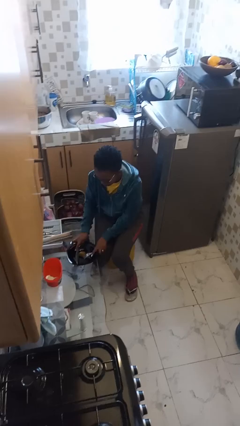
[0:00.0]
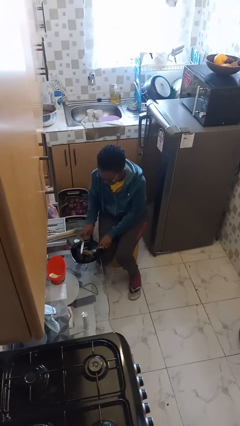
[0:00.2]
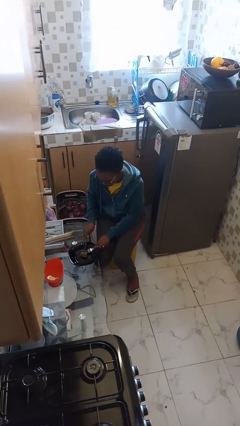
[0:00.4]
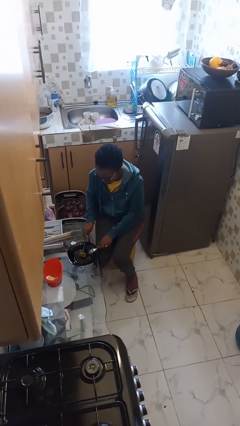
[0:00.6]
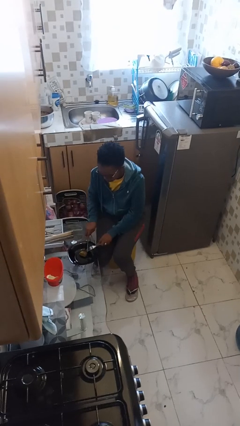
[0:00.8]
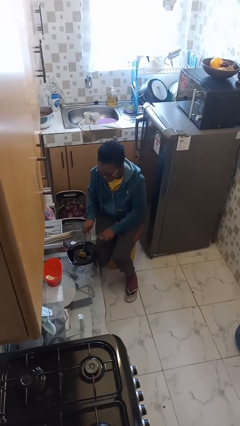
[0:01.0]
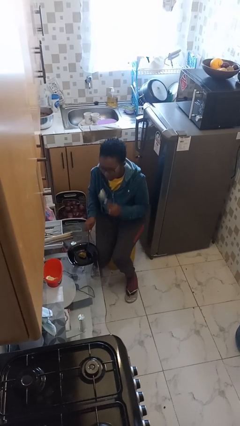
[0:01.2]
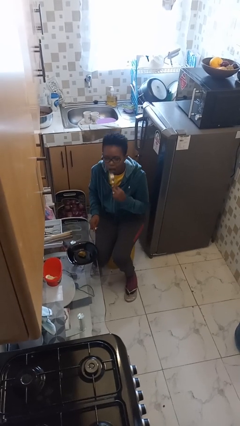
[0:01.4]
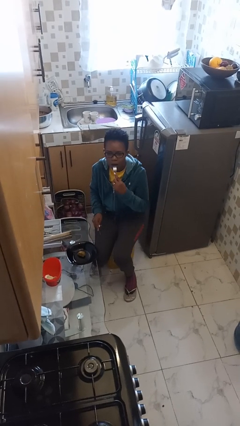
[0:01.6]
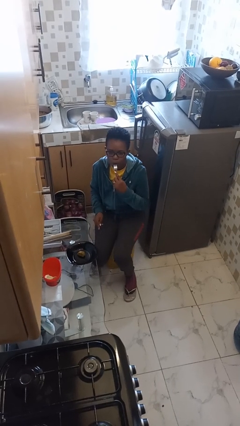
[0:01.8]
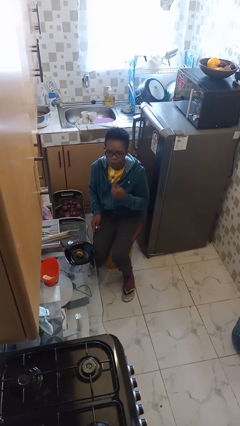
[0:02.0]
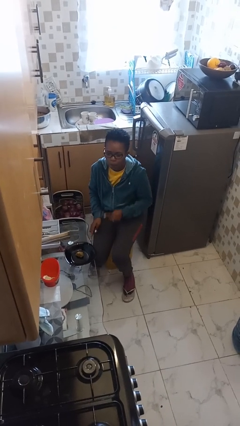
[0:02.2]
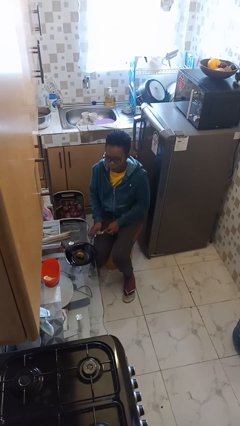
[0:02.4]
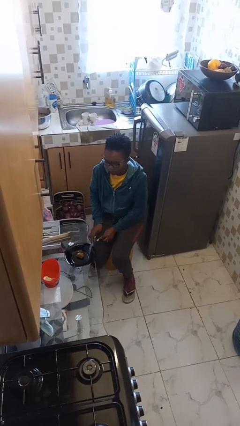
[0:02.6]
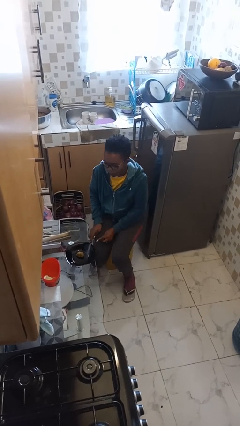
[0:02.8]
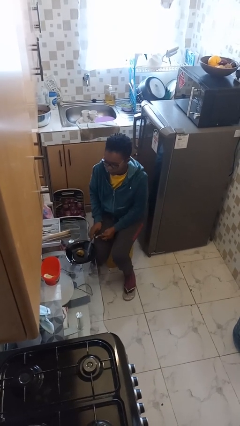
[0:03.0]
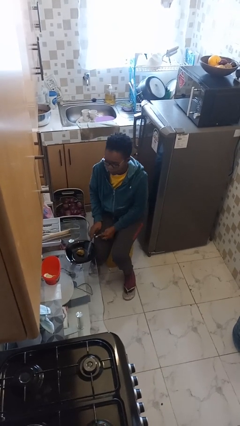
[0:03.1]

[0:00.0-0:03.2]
person eats with utensil

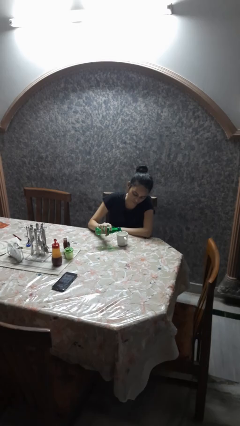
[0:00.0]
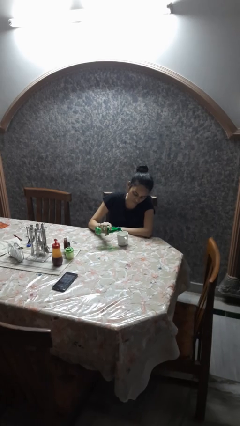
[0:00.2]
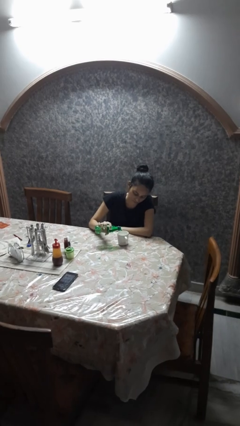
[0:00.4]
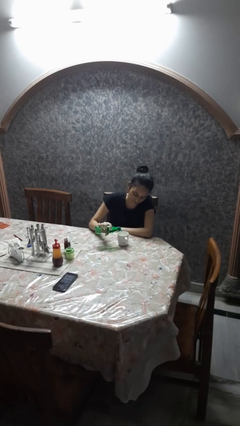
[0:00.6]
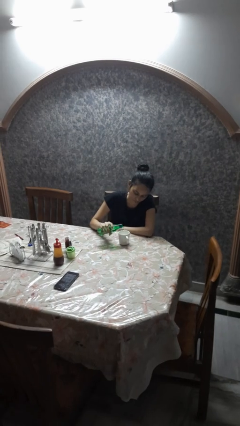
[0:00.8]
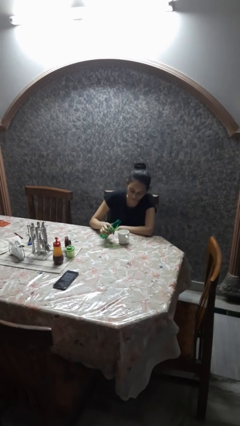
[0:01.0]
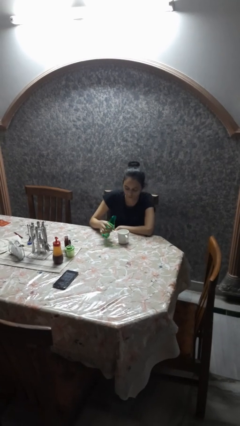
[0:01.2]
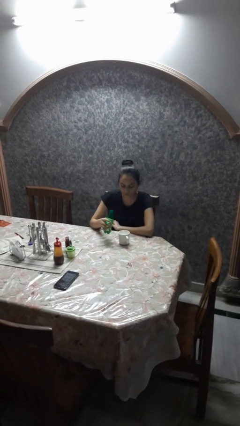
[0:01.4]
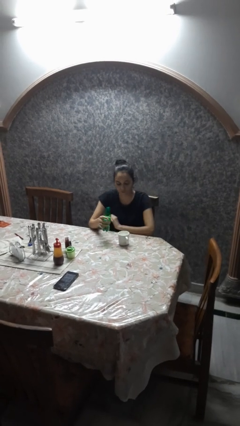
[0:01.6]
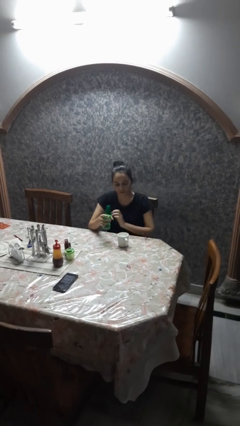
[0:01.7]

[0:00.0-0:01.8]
person pours liquid into cup

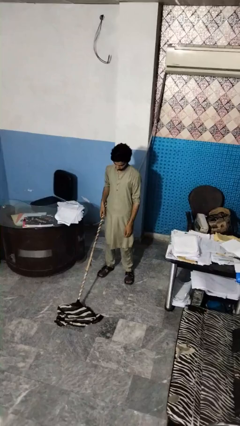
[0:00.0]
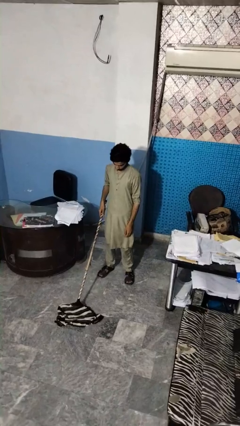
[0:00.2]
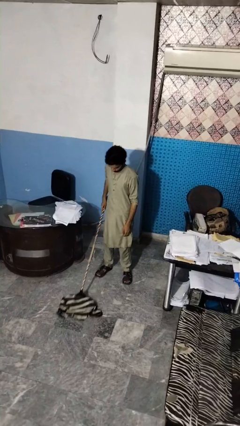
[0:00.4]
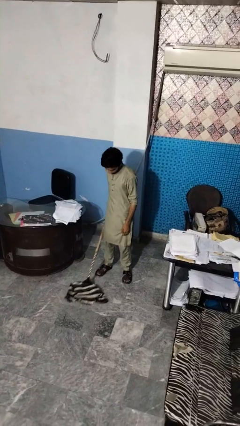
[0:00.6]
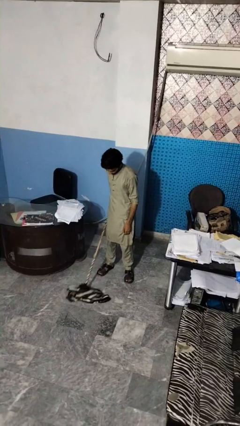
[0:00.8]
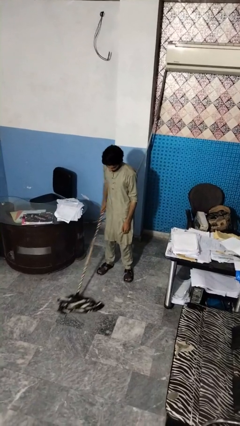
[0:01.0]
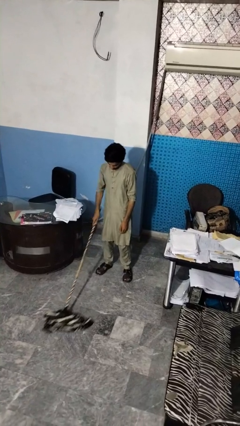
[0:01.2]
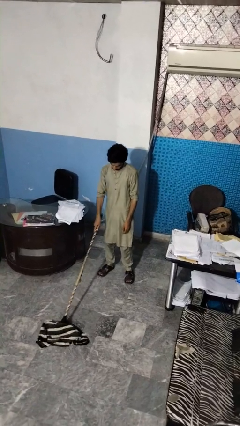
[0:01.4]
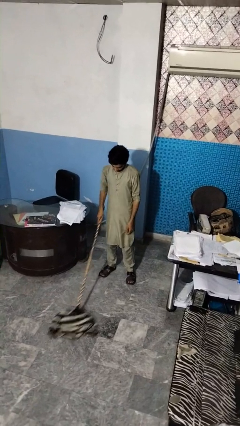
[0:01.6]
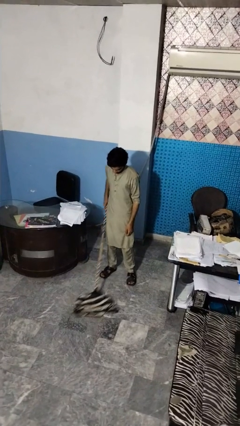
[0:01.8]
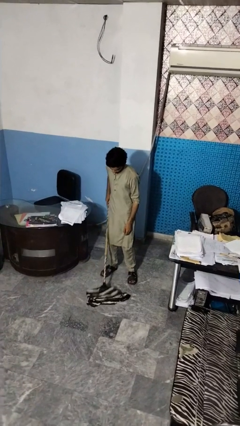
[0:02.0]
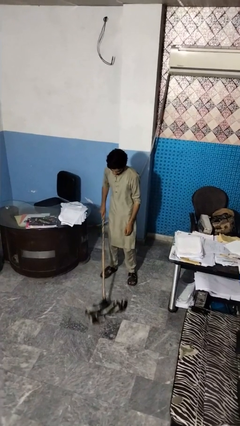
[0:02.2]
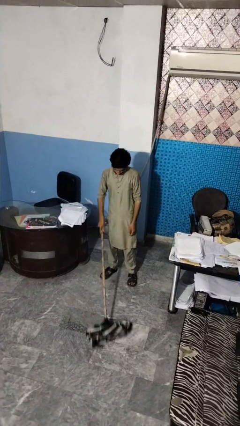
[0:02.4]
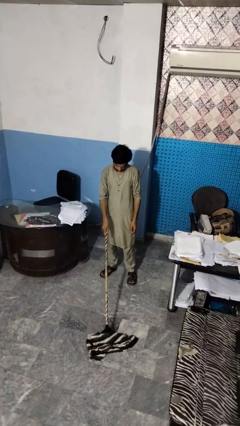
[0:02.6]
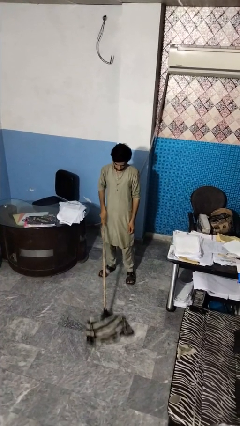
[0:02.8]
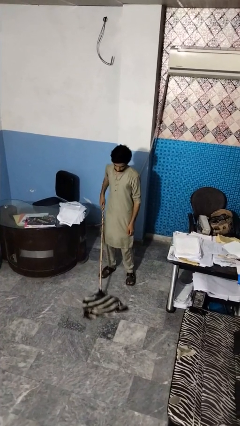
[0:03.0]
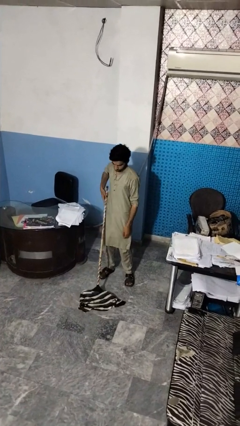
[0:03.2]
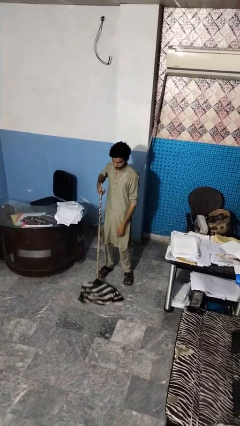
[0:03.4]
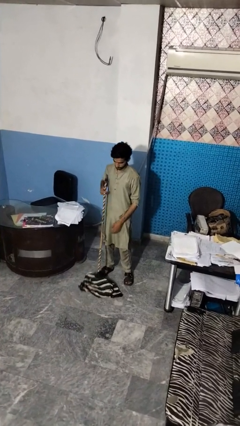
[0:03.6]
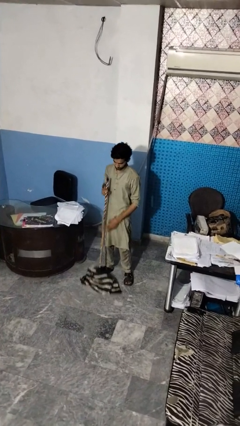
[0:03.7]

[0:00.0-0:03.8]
person mops

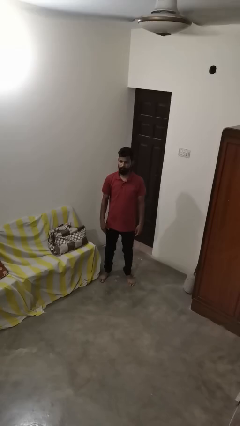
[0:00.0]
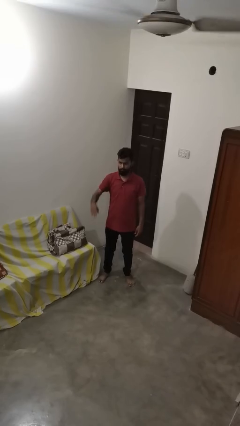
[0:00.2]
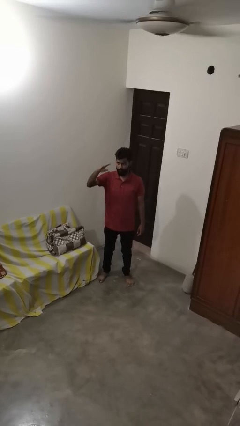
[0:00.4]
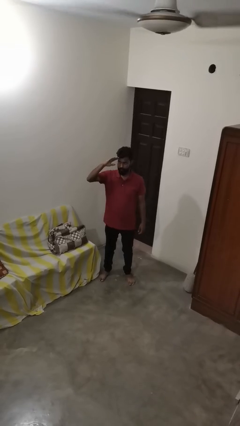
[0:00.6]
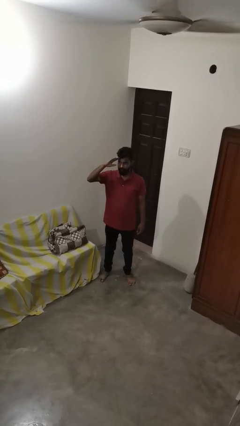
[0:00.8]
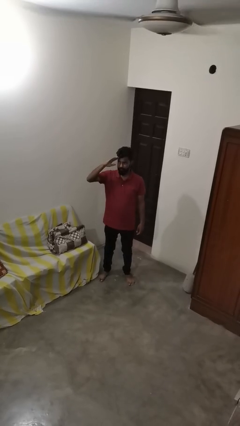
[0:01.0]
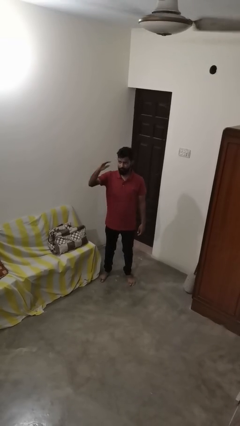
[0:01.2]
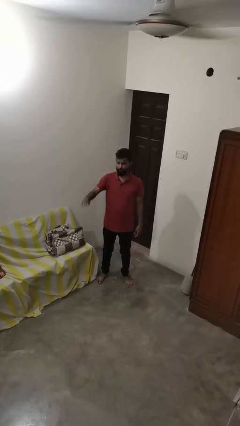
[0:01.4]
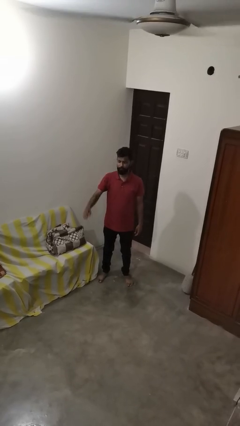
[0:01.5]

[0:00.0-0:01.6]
person salutes

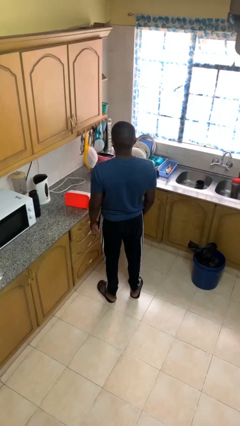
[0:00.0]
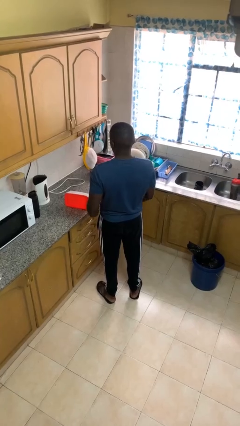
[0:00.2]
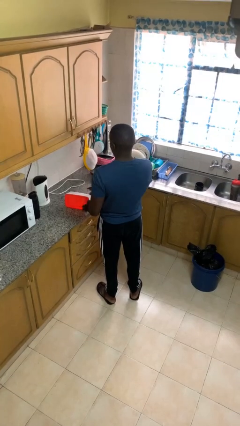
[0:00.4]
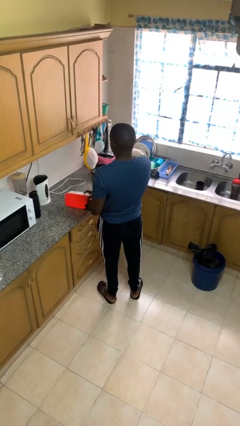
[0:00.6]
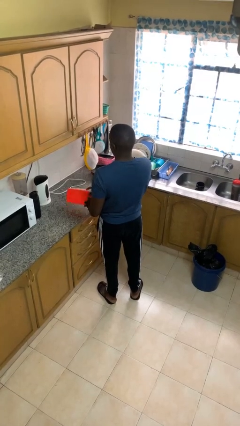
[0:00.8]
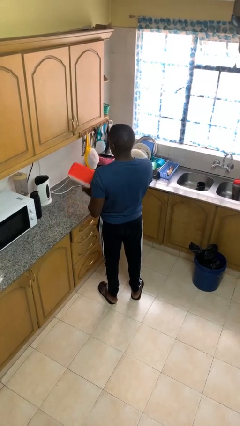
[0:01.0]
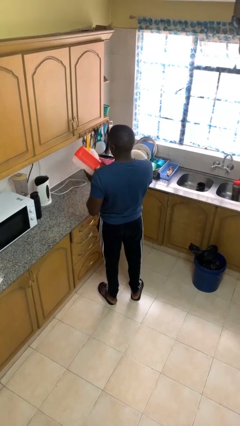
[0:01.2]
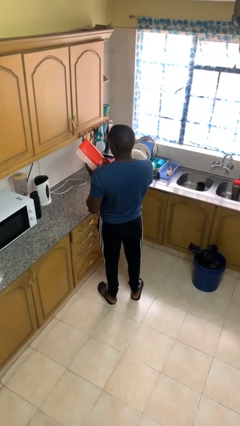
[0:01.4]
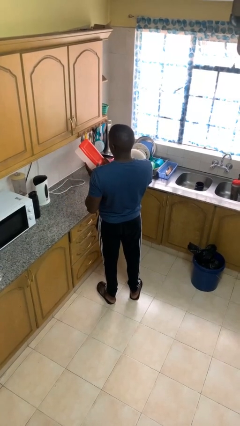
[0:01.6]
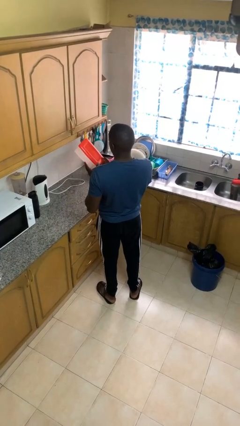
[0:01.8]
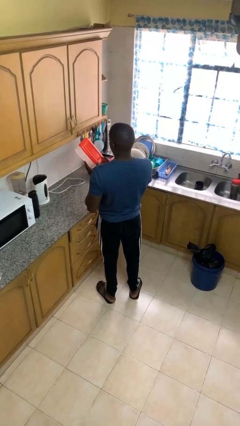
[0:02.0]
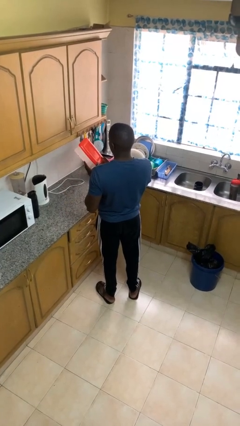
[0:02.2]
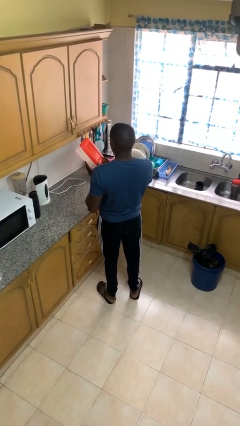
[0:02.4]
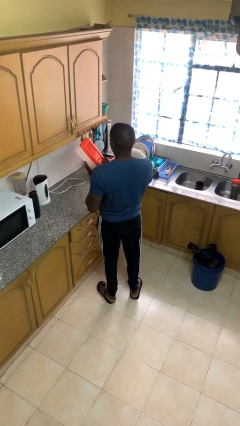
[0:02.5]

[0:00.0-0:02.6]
person picks up object from countertop

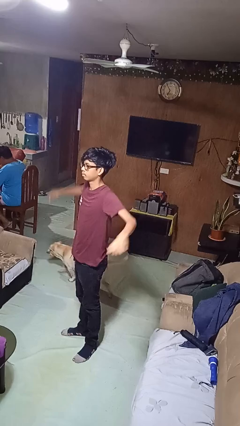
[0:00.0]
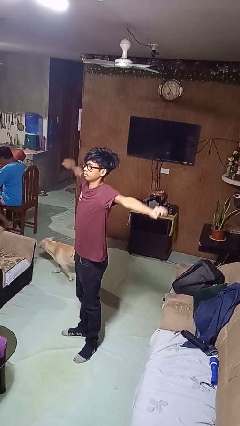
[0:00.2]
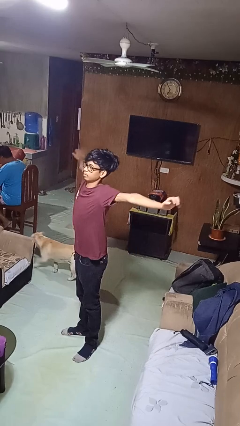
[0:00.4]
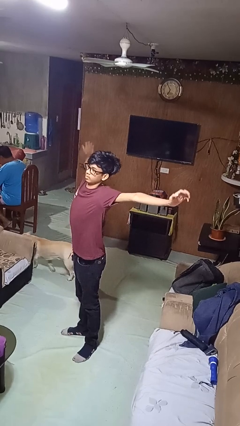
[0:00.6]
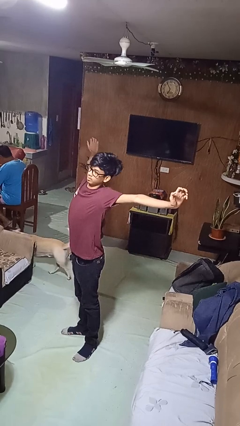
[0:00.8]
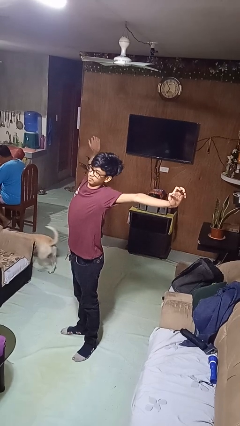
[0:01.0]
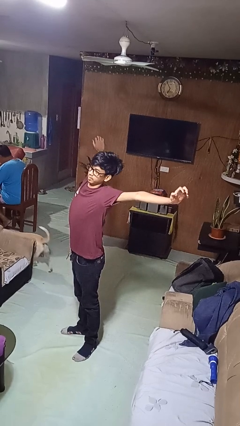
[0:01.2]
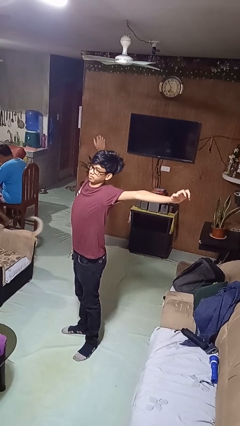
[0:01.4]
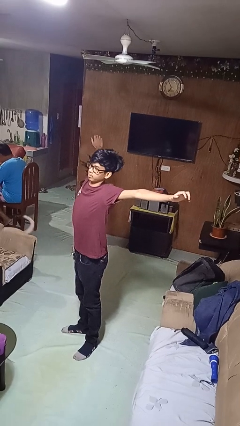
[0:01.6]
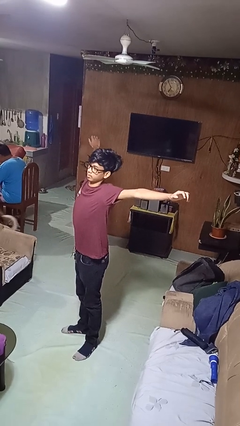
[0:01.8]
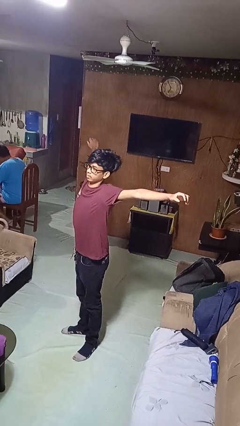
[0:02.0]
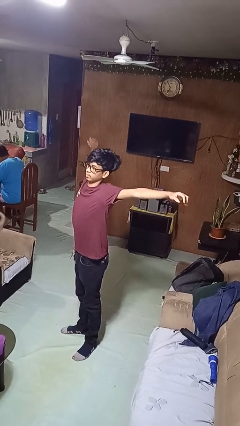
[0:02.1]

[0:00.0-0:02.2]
person stretches arms to side

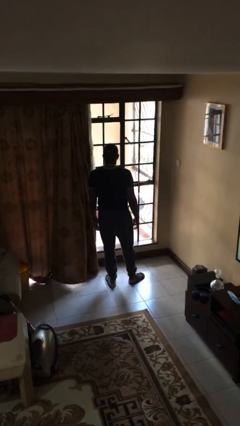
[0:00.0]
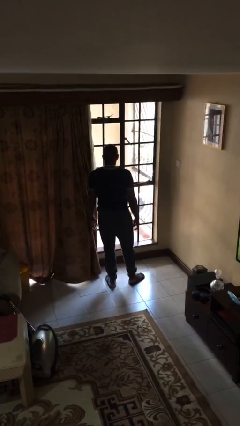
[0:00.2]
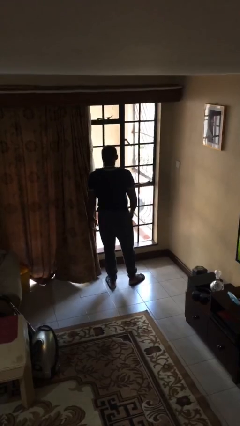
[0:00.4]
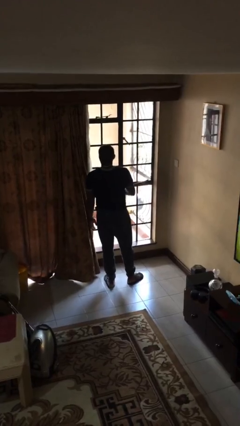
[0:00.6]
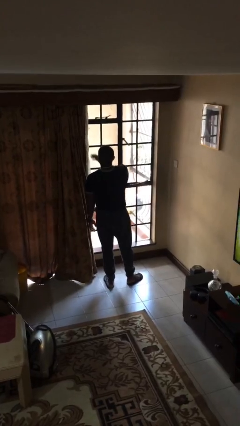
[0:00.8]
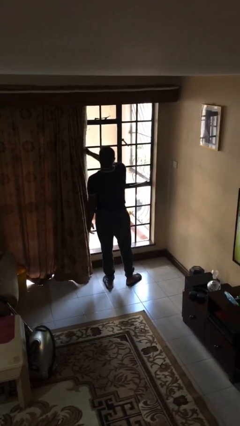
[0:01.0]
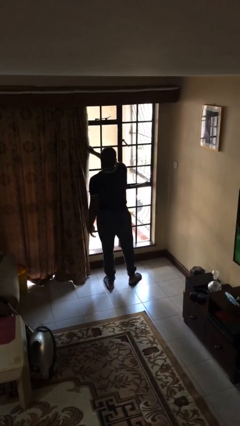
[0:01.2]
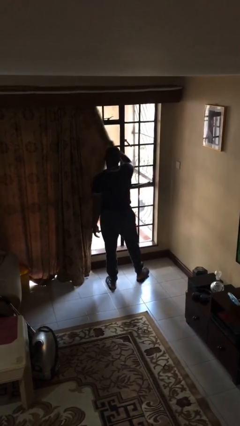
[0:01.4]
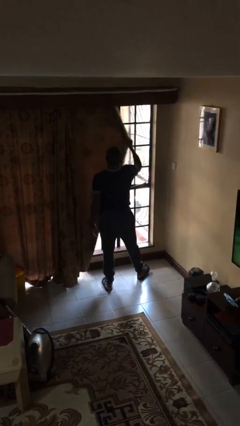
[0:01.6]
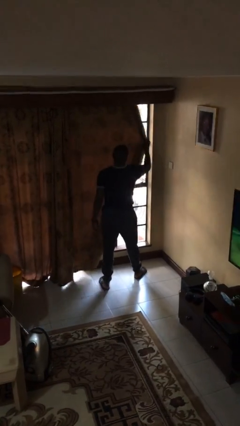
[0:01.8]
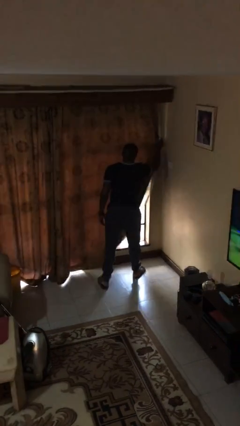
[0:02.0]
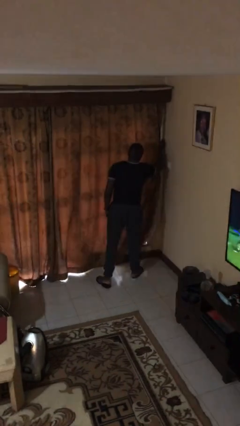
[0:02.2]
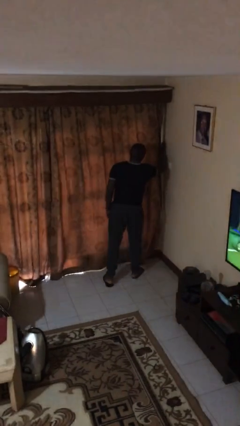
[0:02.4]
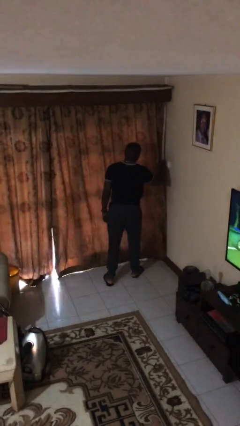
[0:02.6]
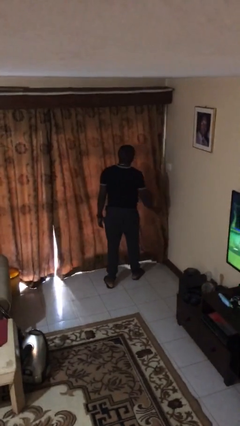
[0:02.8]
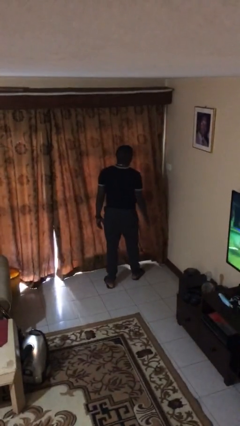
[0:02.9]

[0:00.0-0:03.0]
person closes curtains
